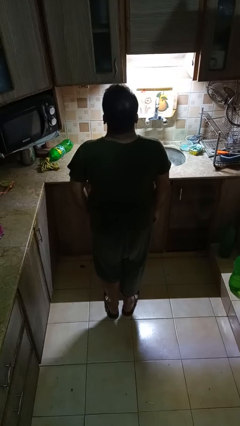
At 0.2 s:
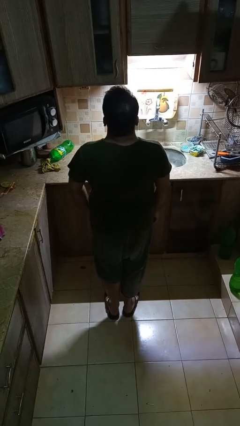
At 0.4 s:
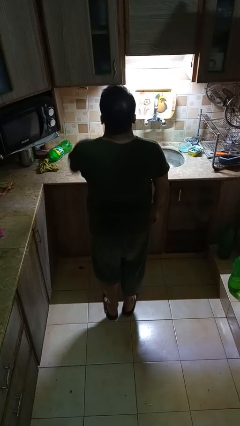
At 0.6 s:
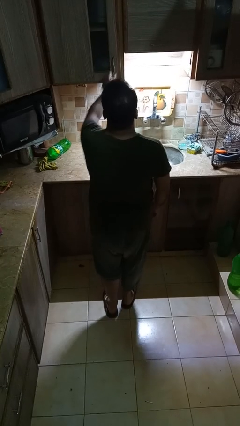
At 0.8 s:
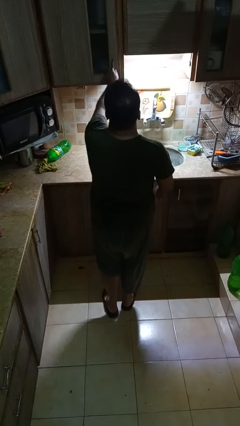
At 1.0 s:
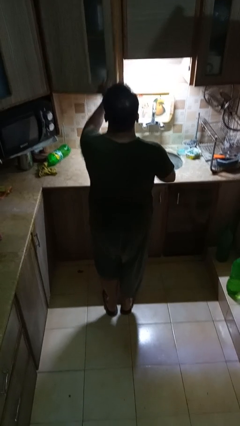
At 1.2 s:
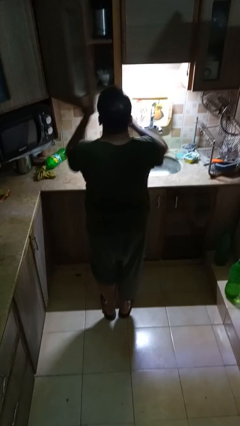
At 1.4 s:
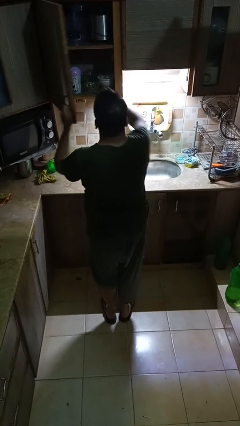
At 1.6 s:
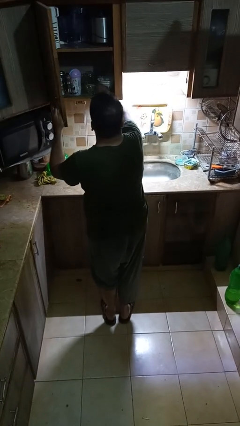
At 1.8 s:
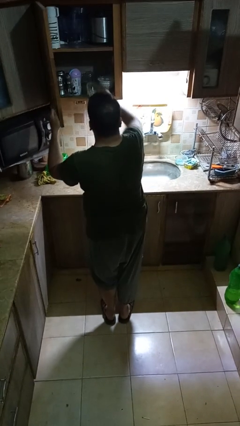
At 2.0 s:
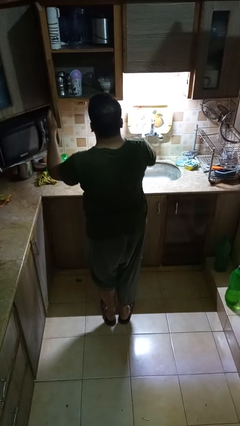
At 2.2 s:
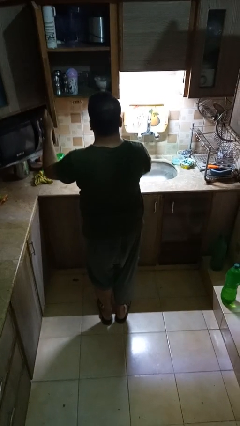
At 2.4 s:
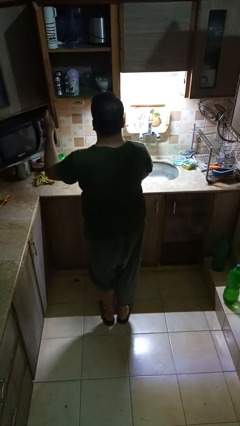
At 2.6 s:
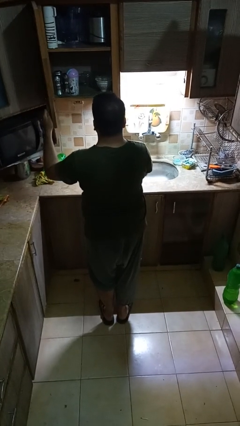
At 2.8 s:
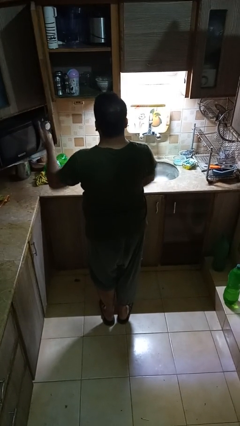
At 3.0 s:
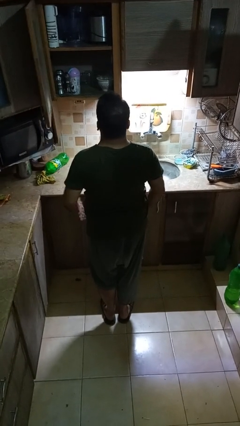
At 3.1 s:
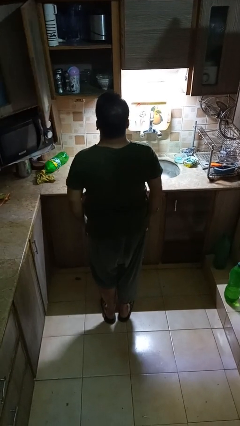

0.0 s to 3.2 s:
person takes object from cabinet

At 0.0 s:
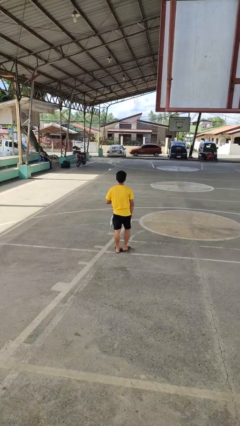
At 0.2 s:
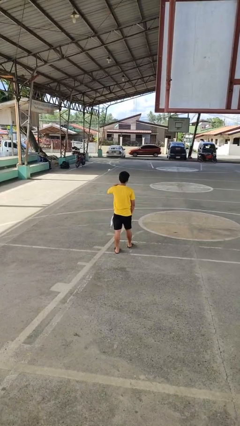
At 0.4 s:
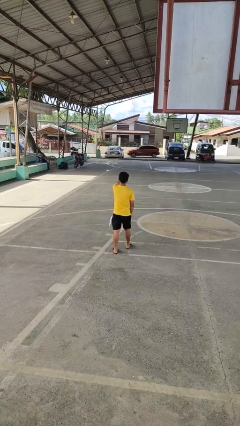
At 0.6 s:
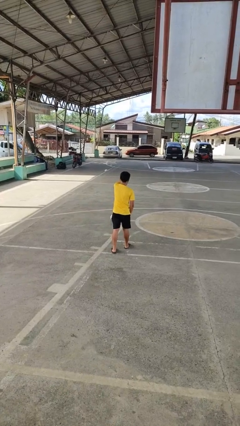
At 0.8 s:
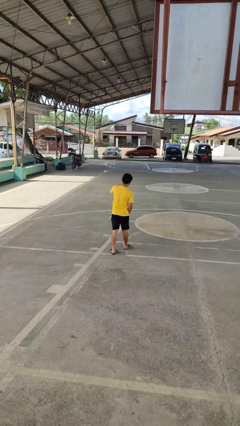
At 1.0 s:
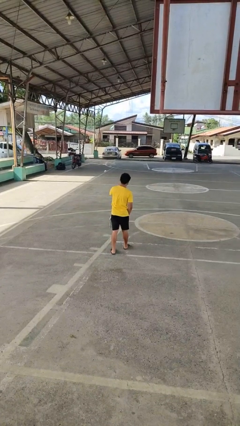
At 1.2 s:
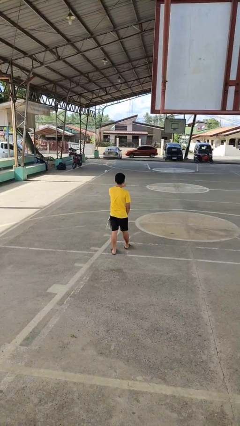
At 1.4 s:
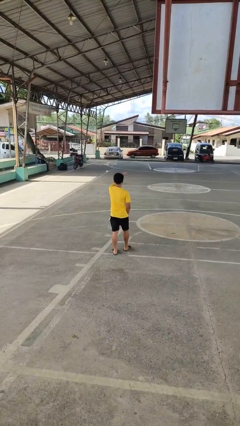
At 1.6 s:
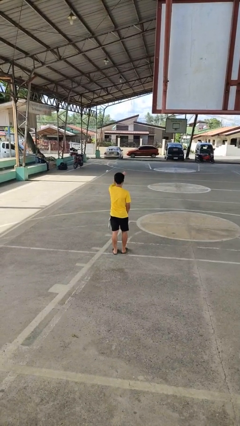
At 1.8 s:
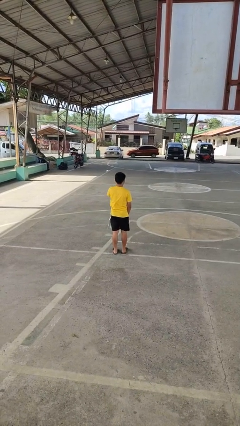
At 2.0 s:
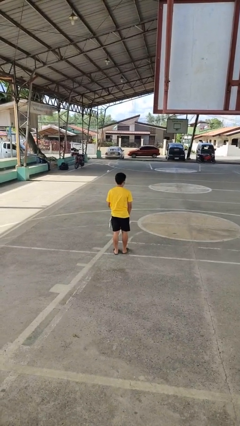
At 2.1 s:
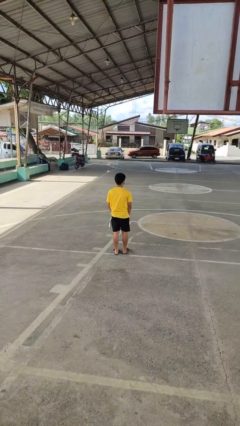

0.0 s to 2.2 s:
person punches

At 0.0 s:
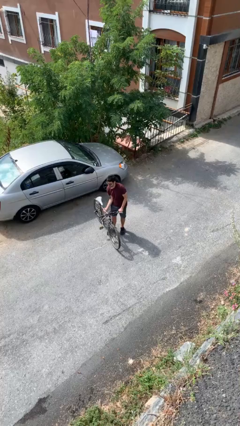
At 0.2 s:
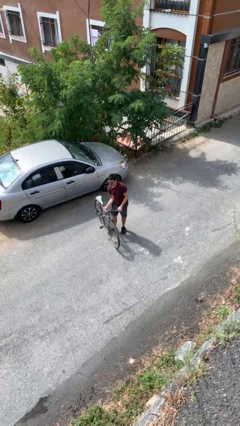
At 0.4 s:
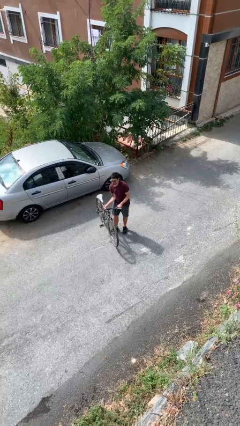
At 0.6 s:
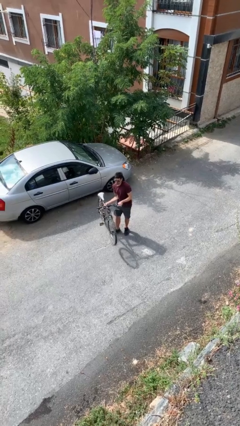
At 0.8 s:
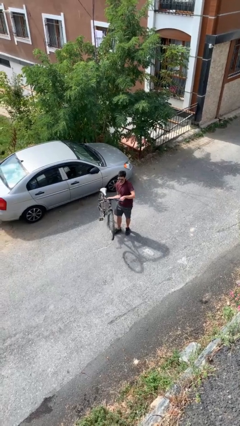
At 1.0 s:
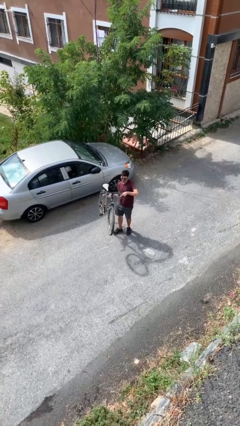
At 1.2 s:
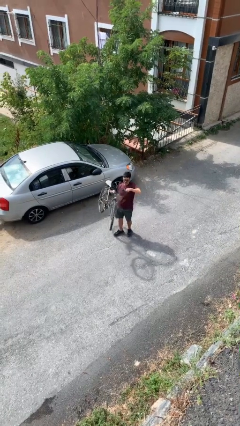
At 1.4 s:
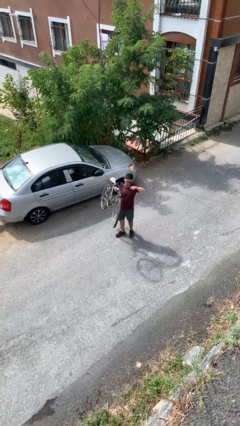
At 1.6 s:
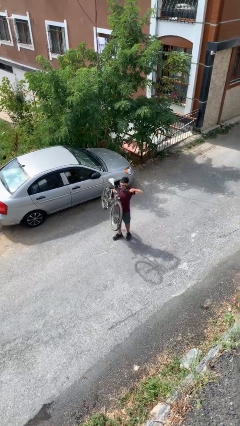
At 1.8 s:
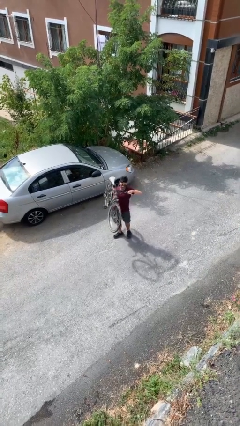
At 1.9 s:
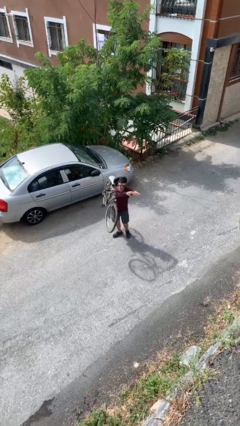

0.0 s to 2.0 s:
person picks up object from floor

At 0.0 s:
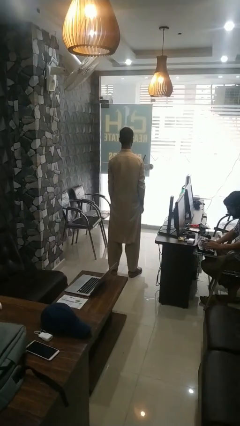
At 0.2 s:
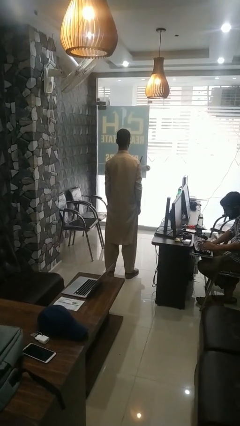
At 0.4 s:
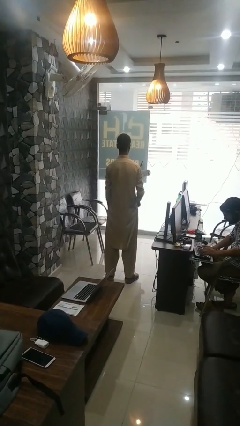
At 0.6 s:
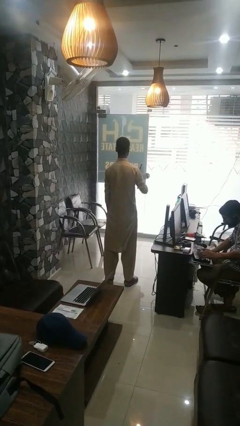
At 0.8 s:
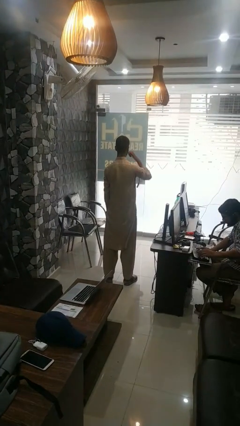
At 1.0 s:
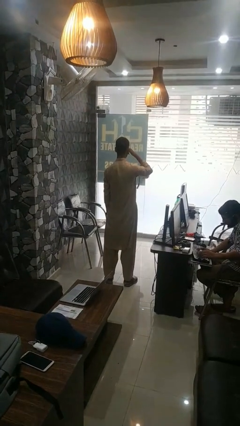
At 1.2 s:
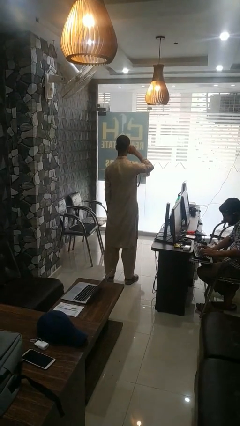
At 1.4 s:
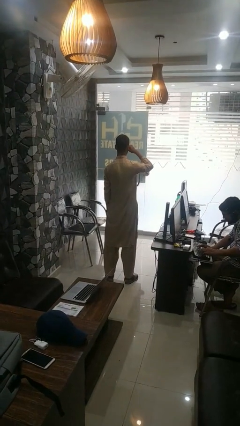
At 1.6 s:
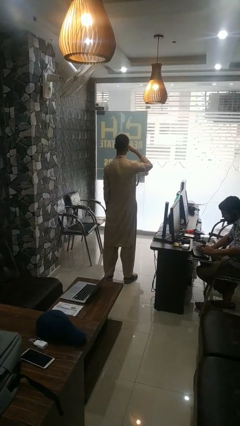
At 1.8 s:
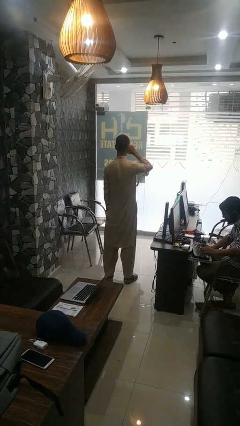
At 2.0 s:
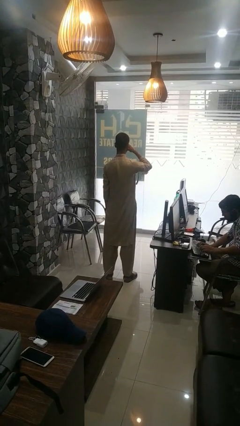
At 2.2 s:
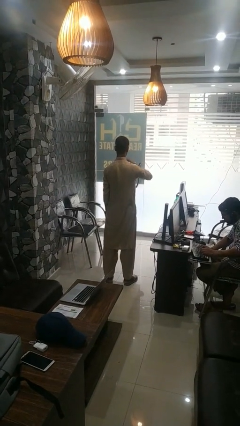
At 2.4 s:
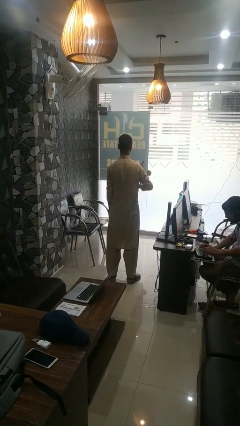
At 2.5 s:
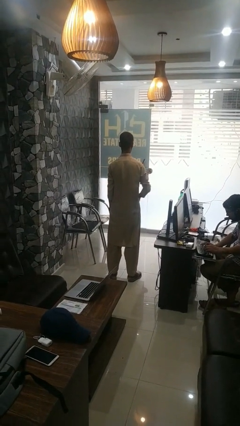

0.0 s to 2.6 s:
person rubs eyes

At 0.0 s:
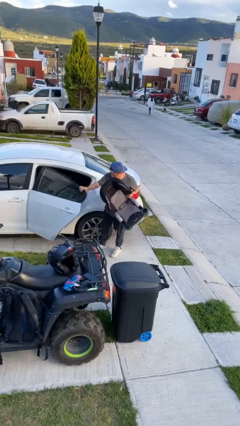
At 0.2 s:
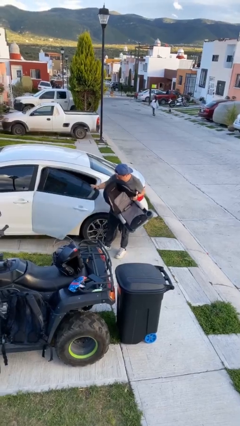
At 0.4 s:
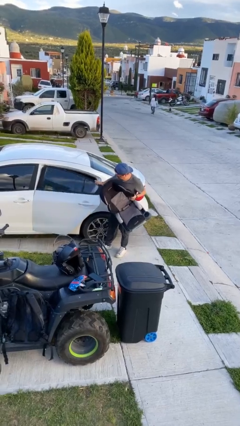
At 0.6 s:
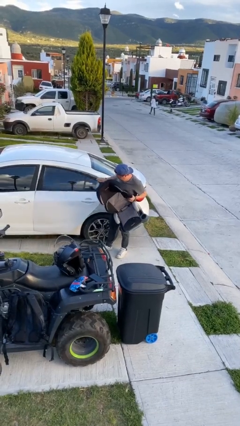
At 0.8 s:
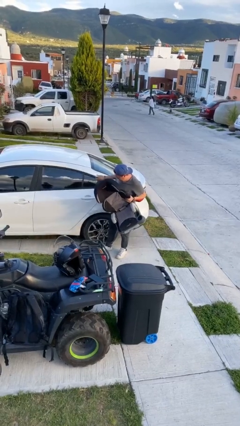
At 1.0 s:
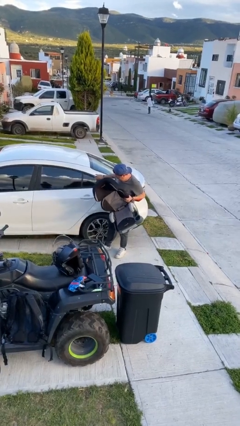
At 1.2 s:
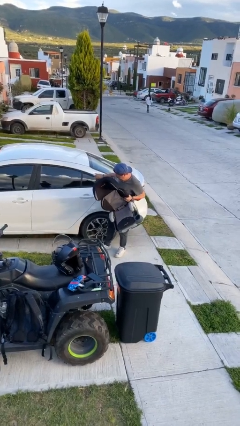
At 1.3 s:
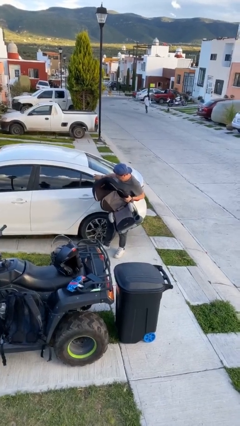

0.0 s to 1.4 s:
person closes car door

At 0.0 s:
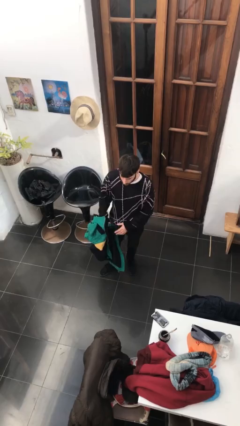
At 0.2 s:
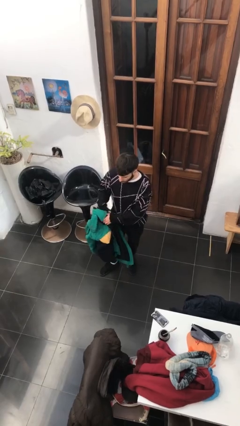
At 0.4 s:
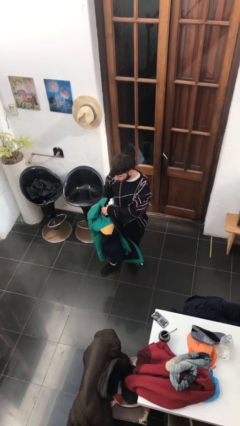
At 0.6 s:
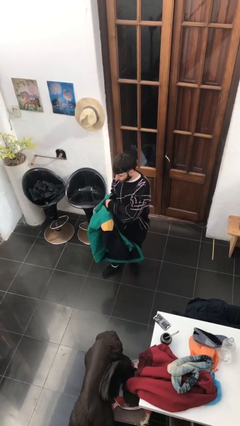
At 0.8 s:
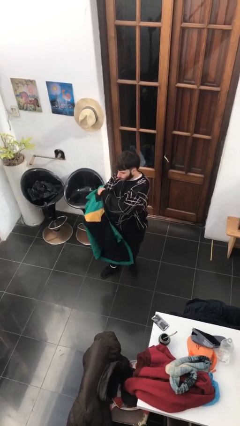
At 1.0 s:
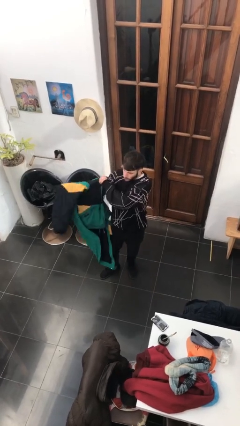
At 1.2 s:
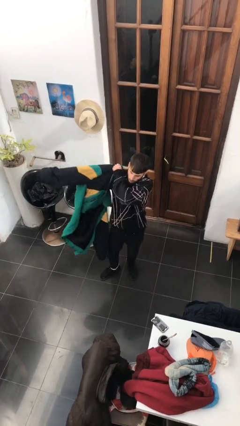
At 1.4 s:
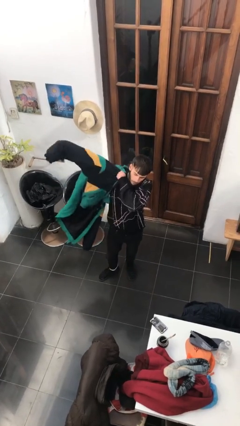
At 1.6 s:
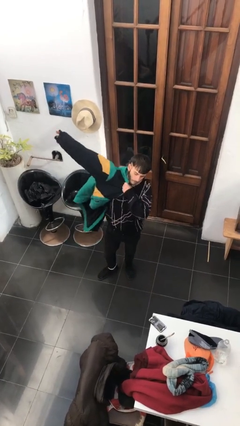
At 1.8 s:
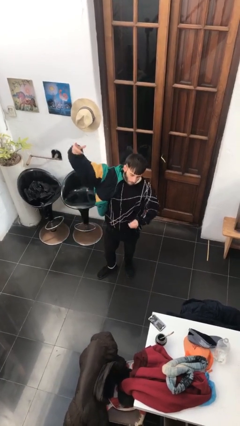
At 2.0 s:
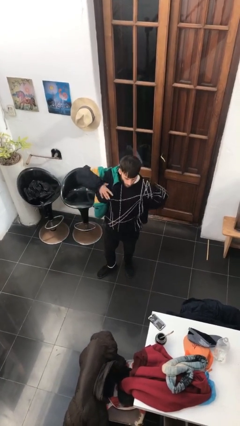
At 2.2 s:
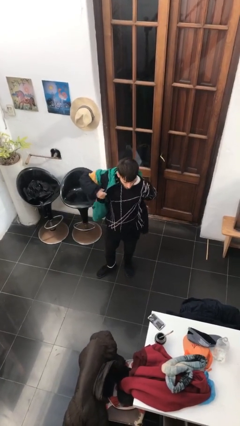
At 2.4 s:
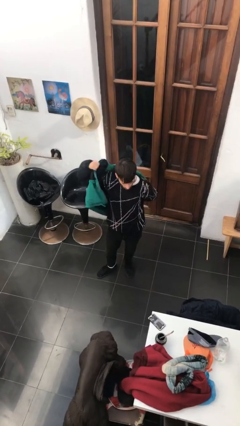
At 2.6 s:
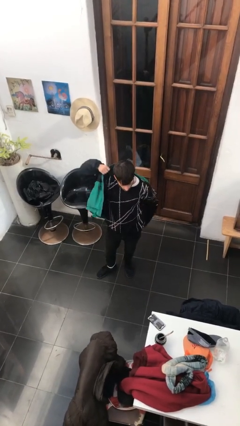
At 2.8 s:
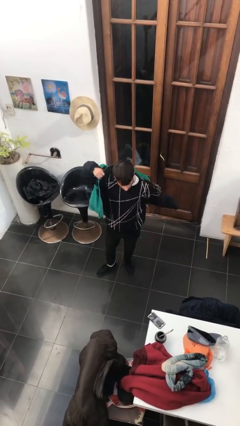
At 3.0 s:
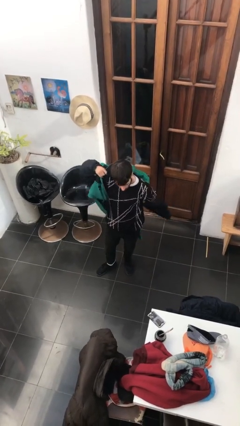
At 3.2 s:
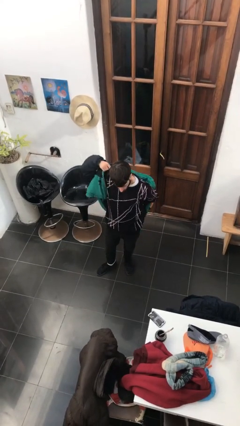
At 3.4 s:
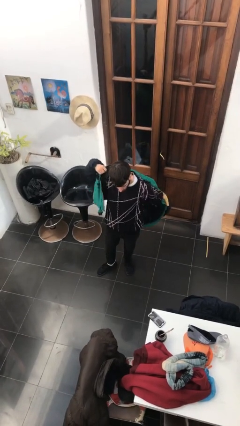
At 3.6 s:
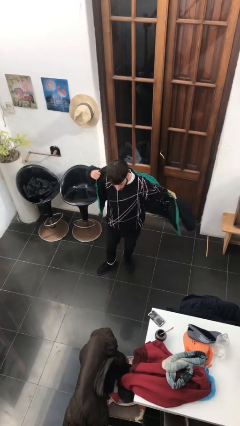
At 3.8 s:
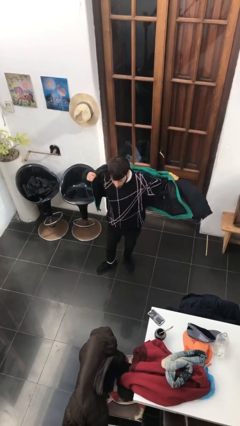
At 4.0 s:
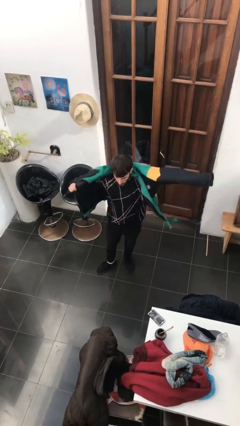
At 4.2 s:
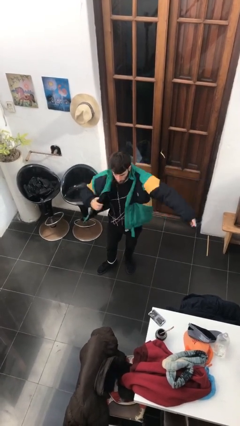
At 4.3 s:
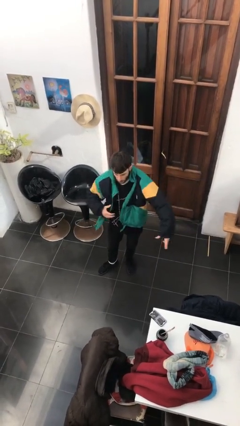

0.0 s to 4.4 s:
person puts on jacket

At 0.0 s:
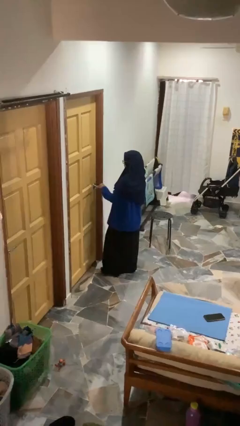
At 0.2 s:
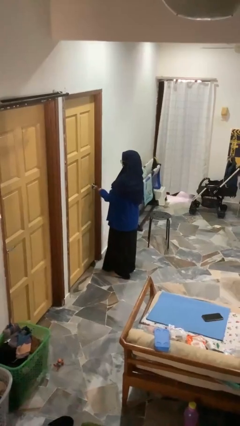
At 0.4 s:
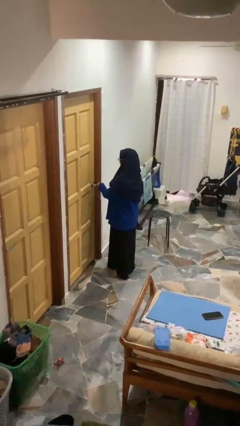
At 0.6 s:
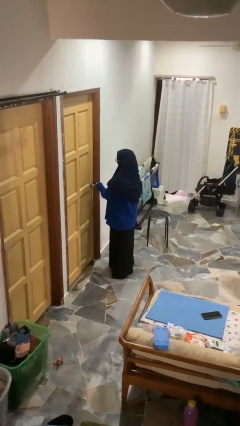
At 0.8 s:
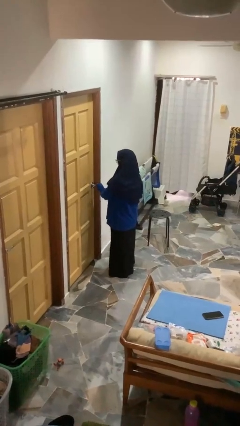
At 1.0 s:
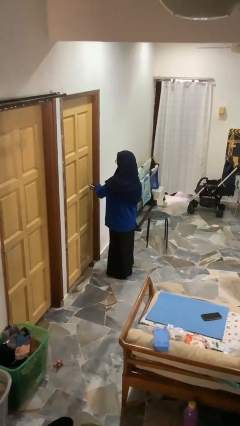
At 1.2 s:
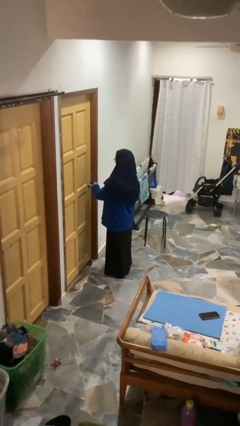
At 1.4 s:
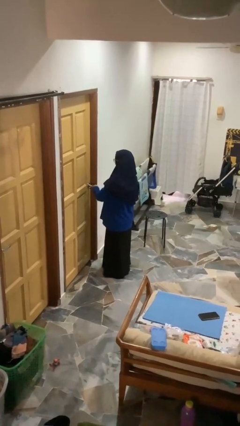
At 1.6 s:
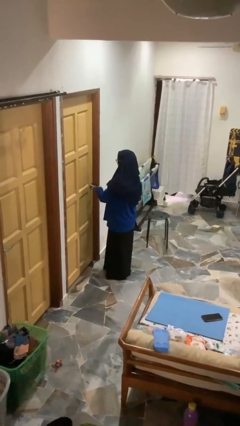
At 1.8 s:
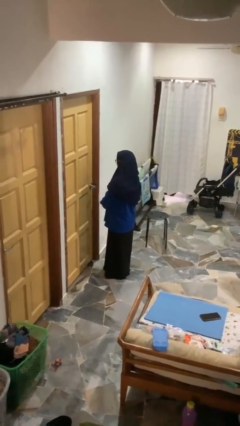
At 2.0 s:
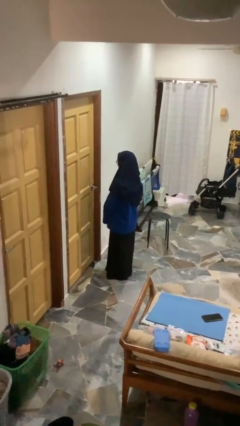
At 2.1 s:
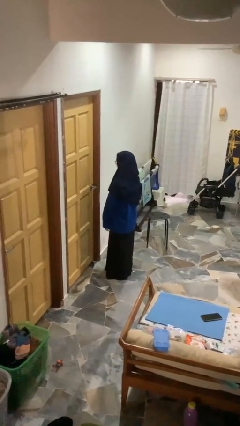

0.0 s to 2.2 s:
person locks door with keys
